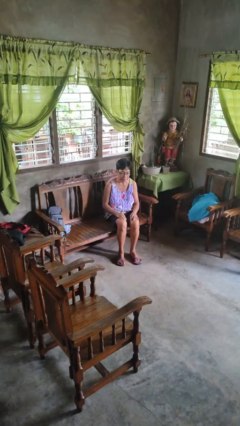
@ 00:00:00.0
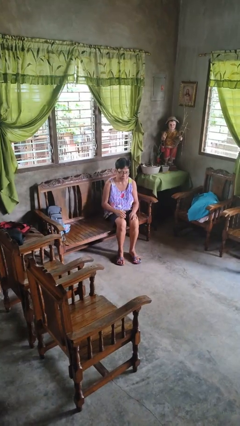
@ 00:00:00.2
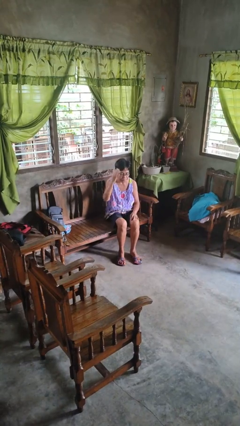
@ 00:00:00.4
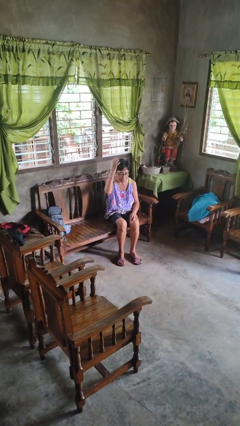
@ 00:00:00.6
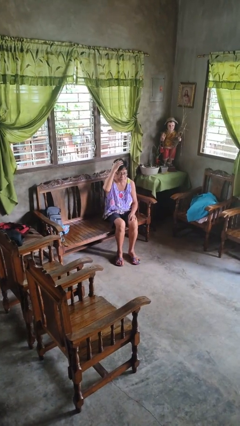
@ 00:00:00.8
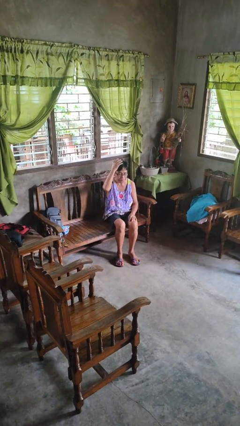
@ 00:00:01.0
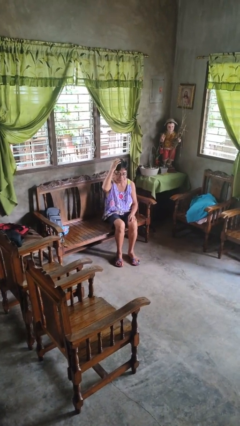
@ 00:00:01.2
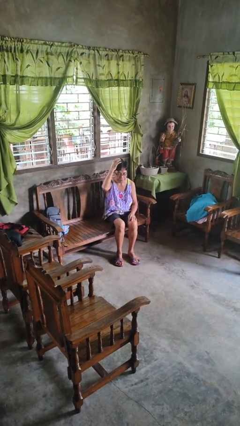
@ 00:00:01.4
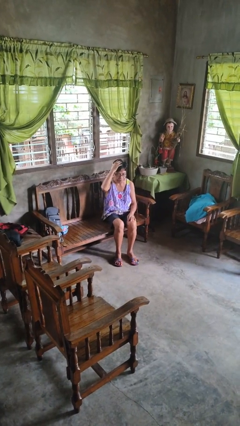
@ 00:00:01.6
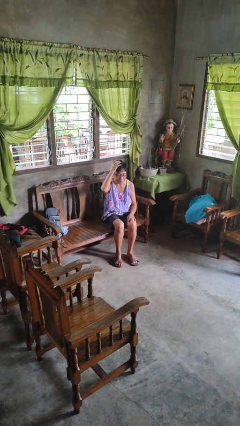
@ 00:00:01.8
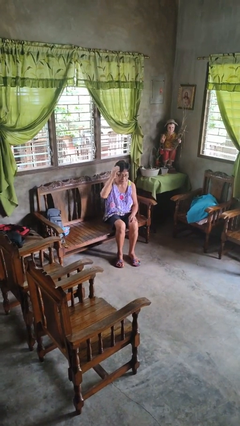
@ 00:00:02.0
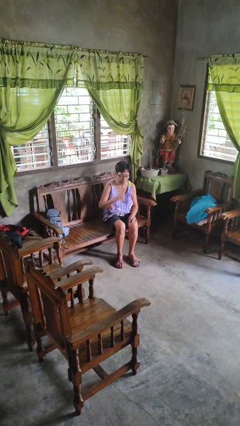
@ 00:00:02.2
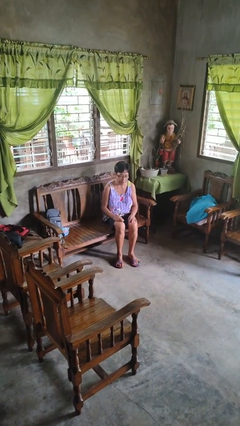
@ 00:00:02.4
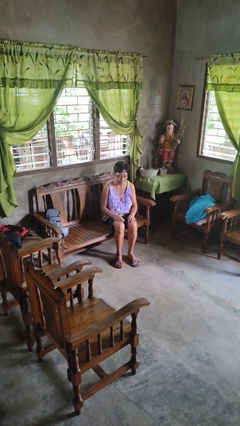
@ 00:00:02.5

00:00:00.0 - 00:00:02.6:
person pats head

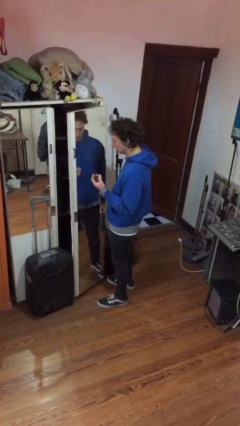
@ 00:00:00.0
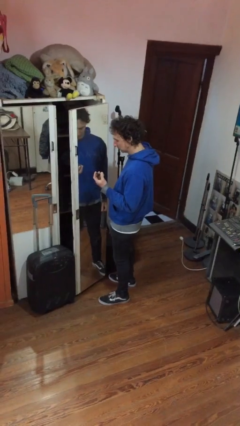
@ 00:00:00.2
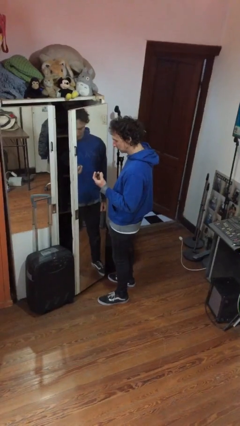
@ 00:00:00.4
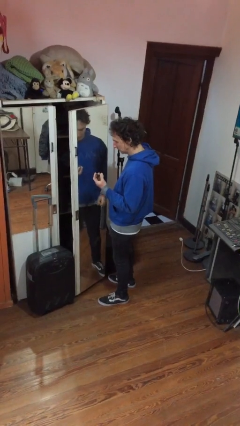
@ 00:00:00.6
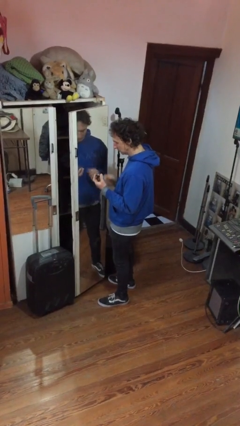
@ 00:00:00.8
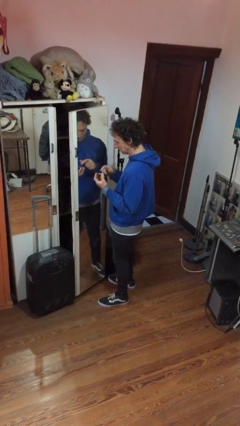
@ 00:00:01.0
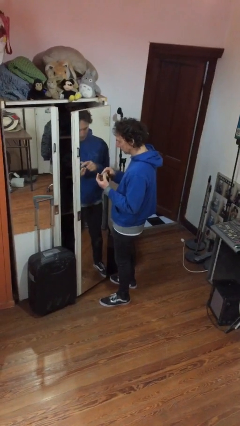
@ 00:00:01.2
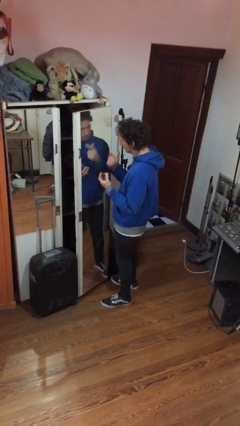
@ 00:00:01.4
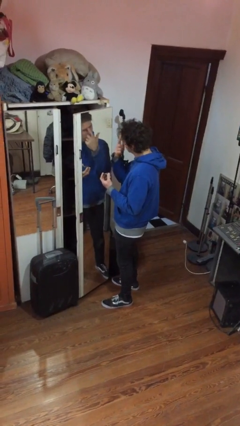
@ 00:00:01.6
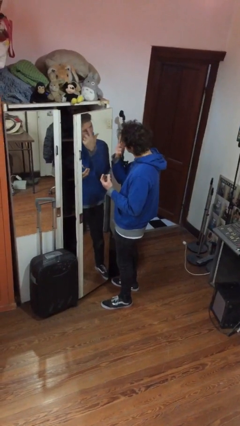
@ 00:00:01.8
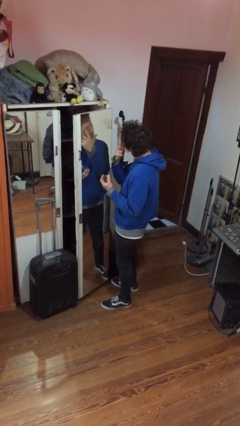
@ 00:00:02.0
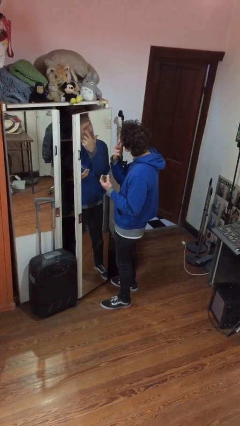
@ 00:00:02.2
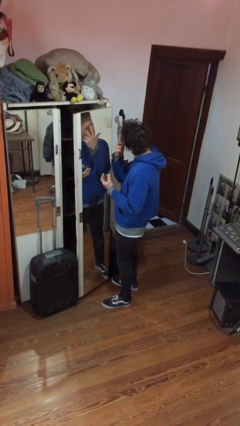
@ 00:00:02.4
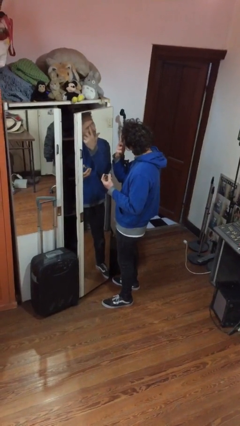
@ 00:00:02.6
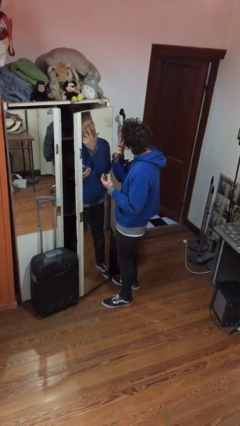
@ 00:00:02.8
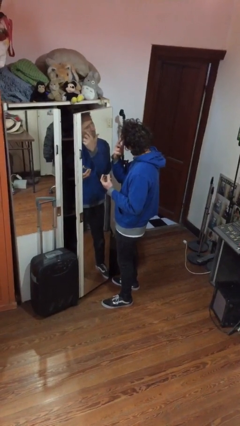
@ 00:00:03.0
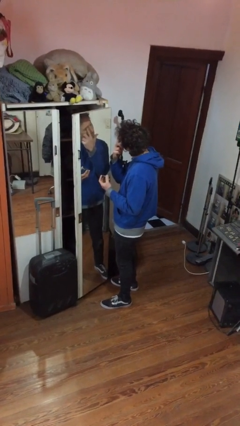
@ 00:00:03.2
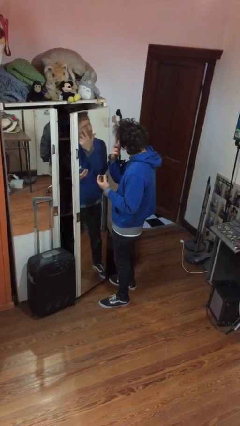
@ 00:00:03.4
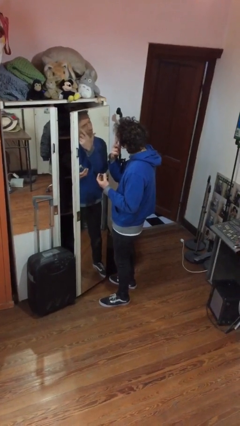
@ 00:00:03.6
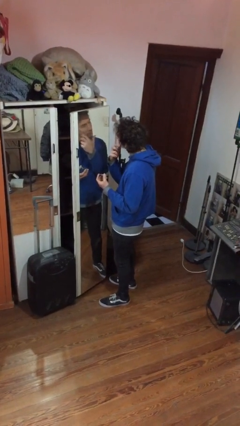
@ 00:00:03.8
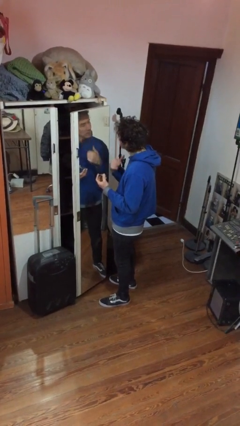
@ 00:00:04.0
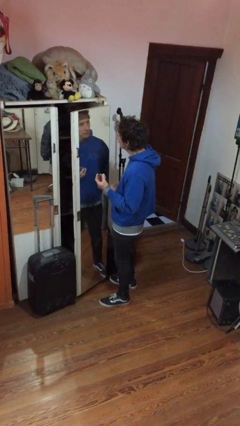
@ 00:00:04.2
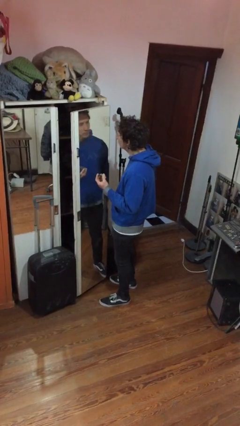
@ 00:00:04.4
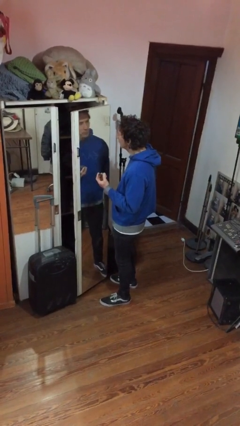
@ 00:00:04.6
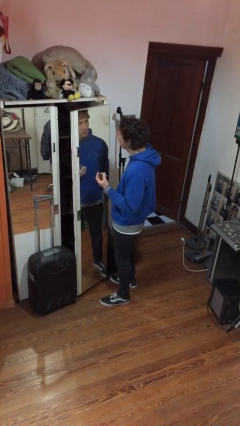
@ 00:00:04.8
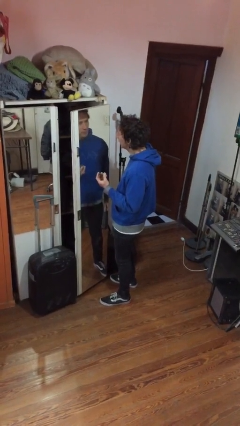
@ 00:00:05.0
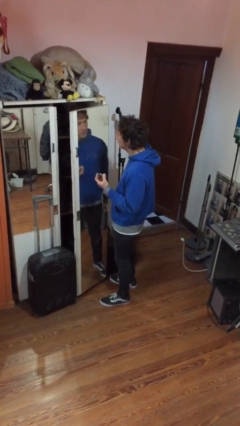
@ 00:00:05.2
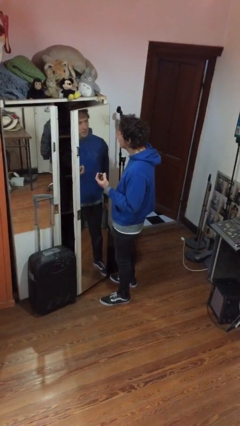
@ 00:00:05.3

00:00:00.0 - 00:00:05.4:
person applies eye makeup

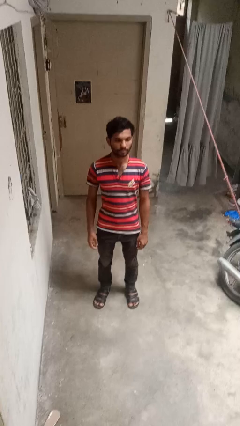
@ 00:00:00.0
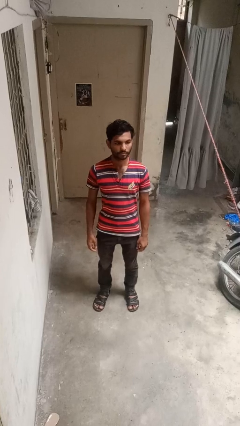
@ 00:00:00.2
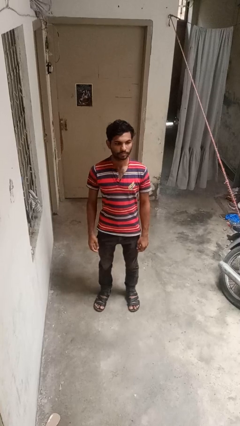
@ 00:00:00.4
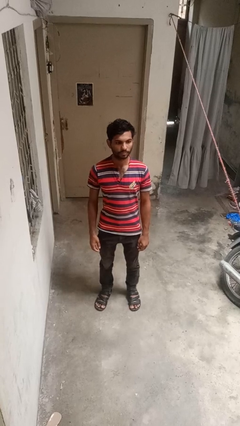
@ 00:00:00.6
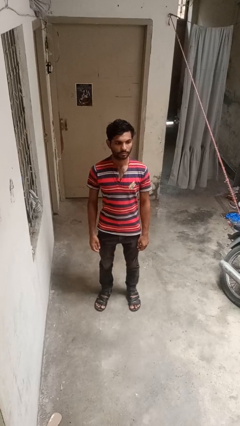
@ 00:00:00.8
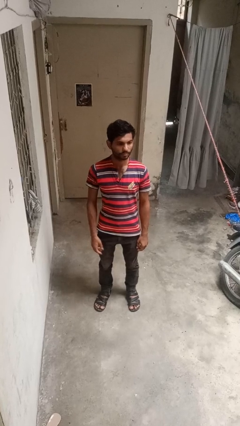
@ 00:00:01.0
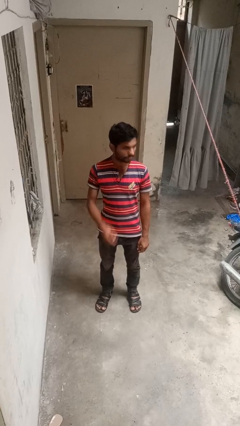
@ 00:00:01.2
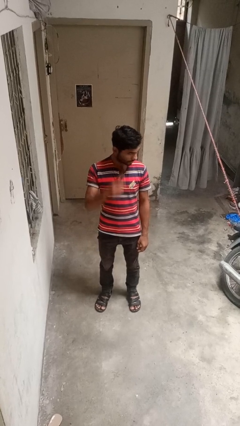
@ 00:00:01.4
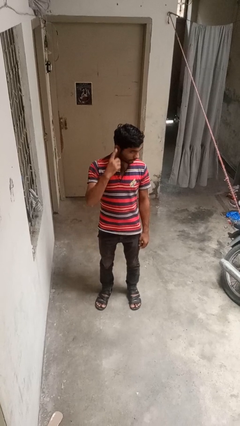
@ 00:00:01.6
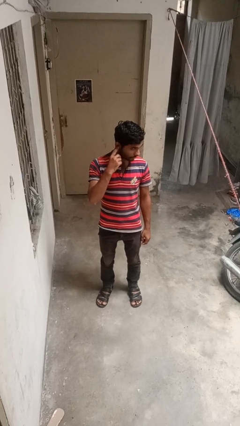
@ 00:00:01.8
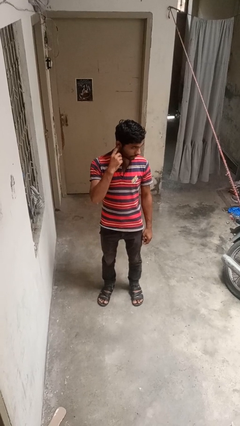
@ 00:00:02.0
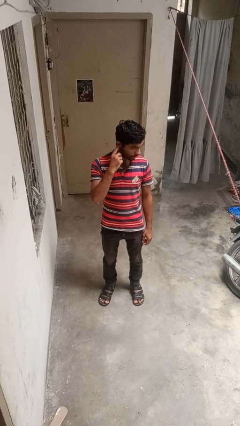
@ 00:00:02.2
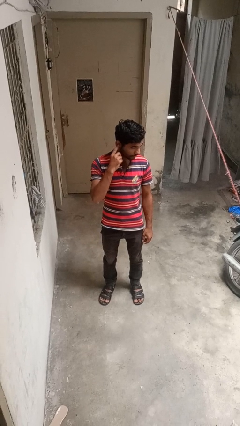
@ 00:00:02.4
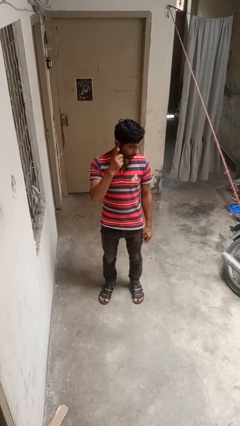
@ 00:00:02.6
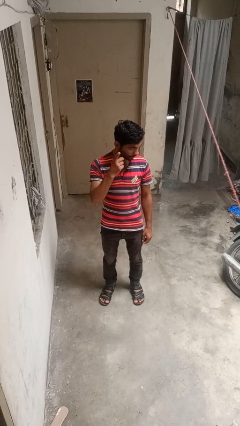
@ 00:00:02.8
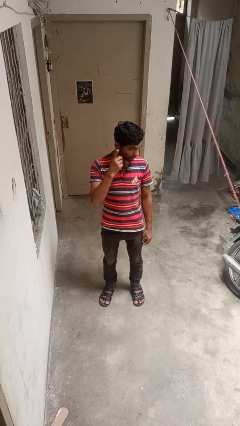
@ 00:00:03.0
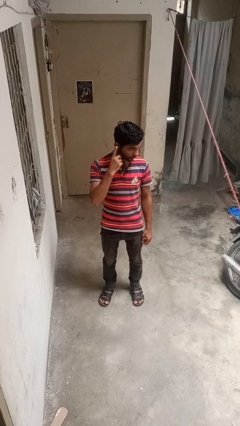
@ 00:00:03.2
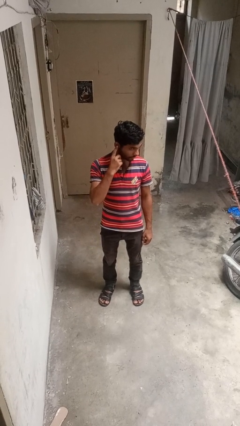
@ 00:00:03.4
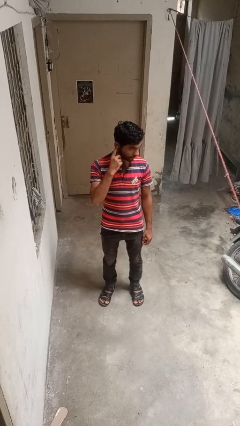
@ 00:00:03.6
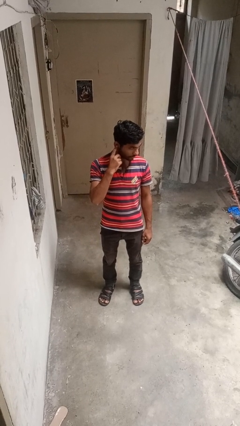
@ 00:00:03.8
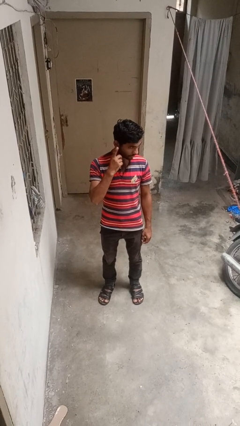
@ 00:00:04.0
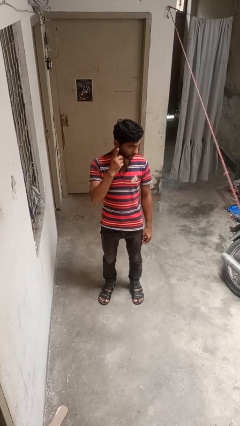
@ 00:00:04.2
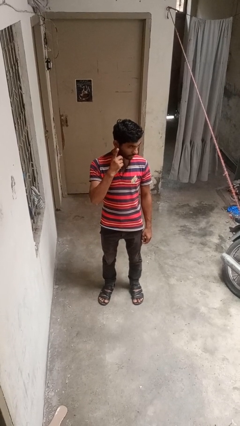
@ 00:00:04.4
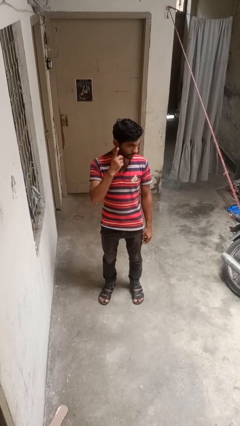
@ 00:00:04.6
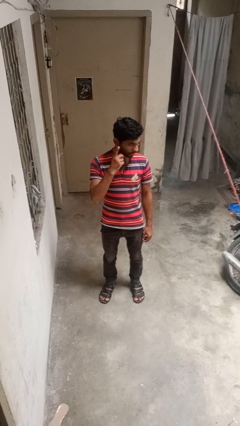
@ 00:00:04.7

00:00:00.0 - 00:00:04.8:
person gestures listen closely

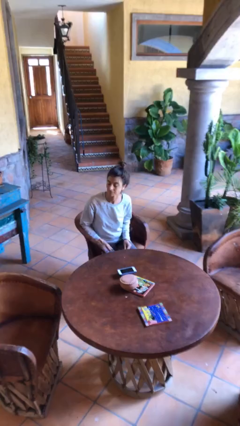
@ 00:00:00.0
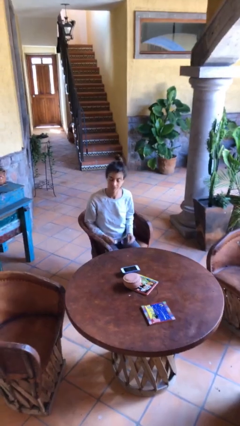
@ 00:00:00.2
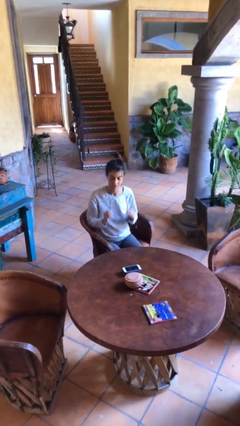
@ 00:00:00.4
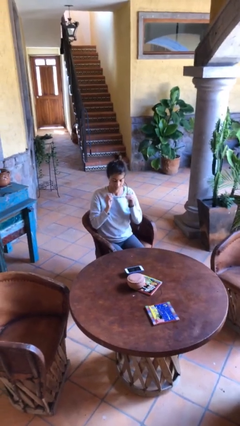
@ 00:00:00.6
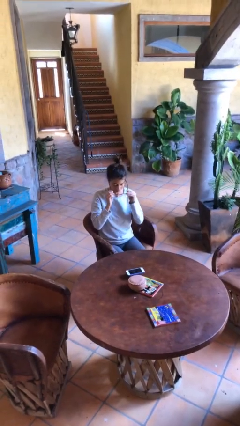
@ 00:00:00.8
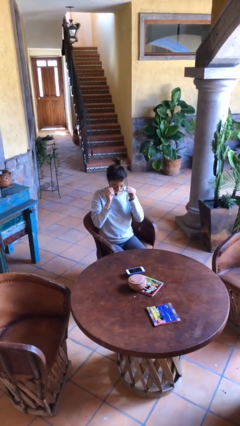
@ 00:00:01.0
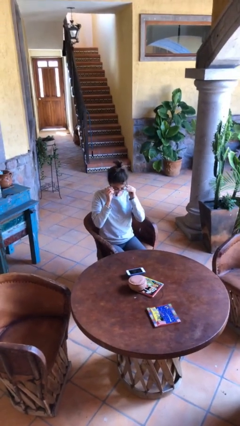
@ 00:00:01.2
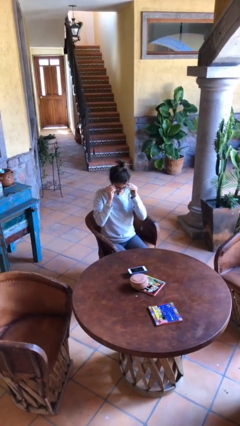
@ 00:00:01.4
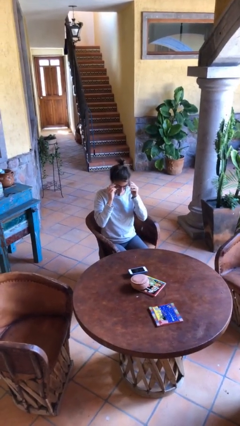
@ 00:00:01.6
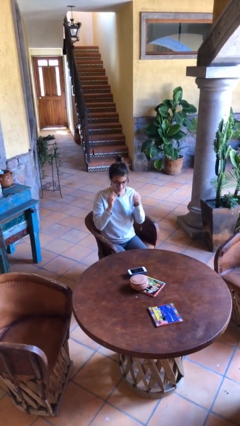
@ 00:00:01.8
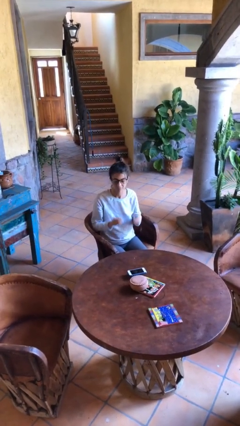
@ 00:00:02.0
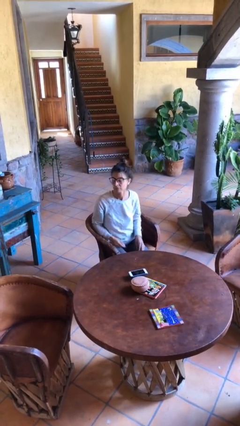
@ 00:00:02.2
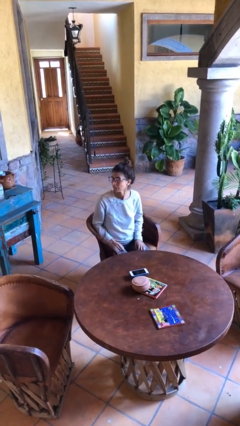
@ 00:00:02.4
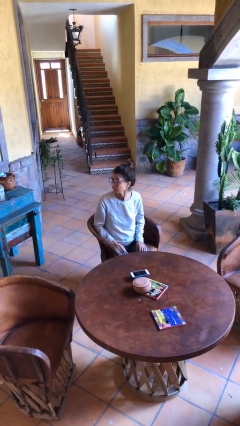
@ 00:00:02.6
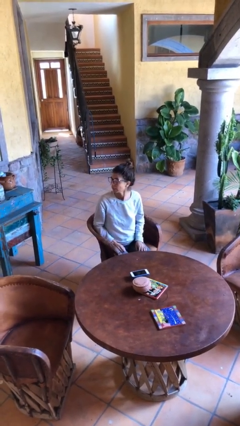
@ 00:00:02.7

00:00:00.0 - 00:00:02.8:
person puts on glasses

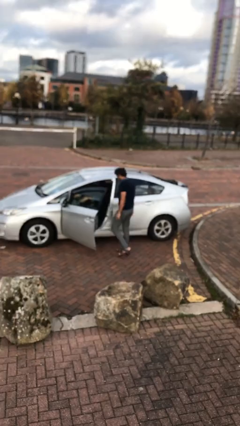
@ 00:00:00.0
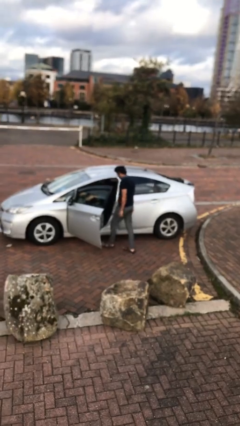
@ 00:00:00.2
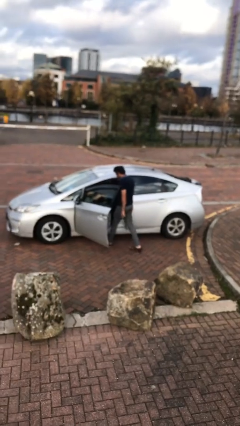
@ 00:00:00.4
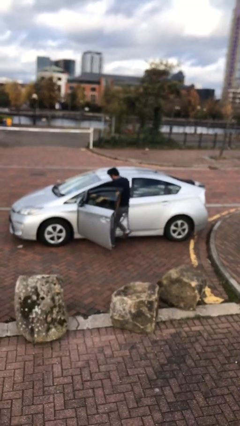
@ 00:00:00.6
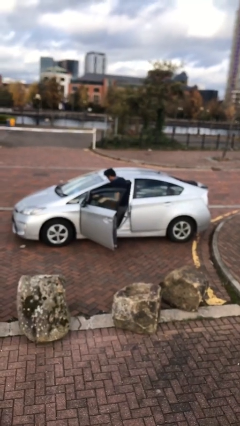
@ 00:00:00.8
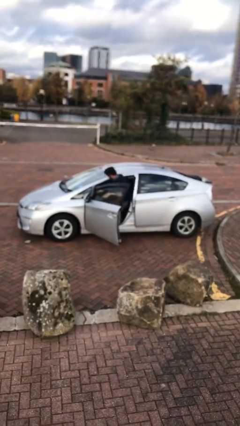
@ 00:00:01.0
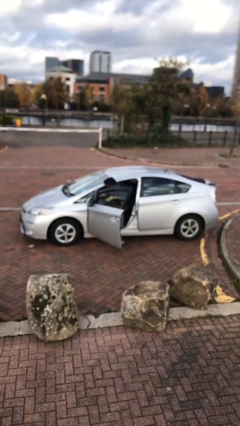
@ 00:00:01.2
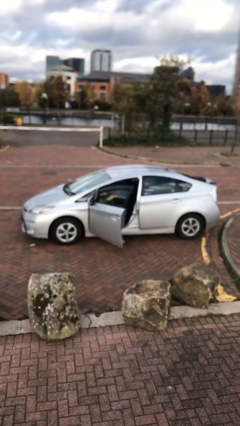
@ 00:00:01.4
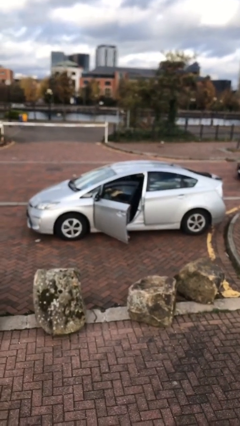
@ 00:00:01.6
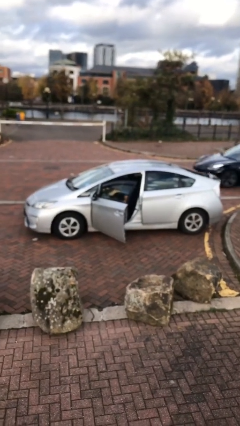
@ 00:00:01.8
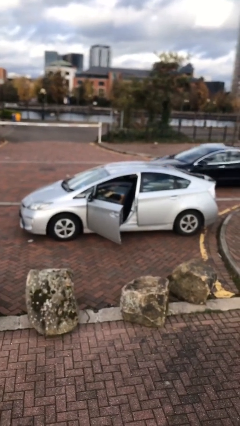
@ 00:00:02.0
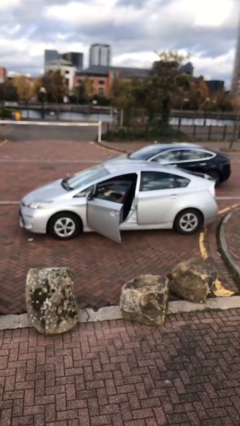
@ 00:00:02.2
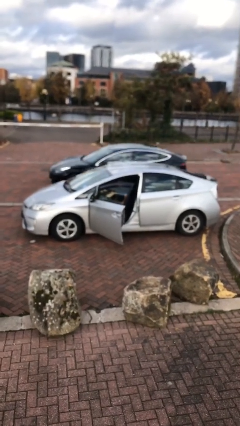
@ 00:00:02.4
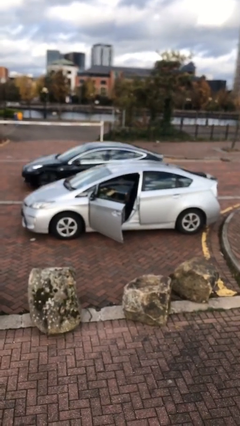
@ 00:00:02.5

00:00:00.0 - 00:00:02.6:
person enters car
